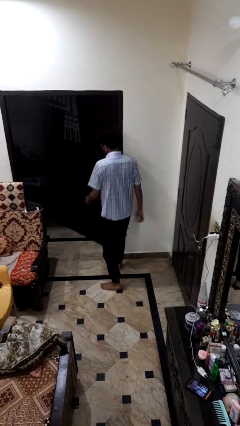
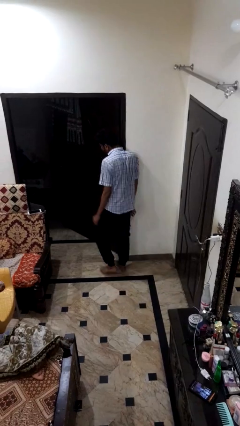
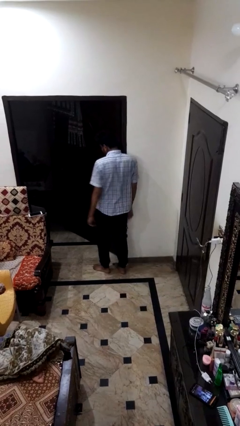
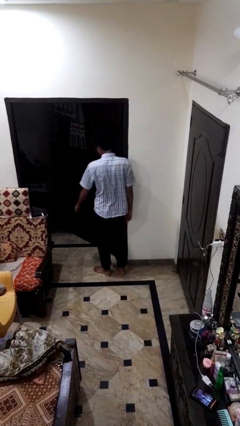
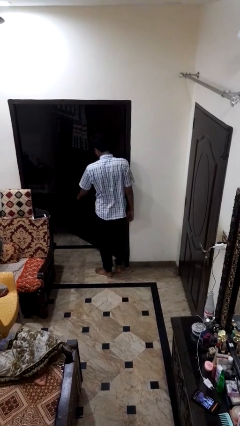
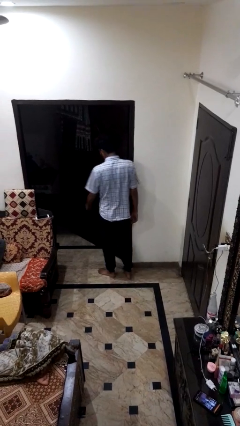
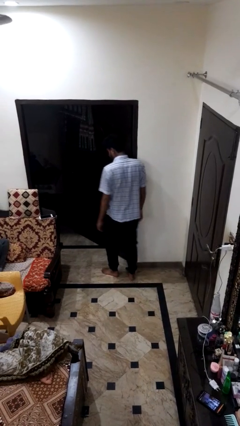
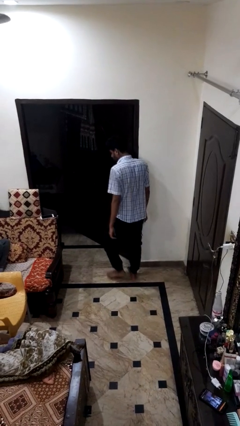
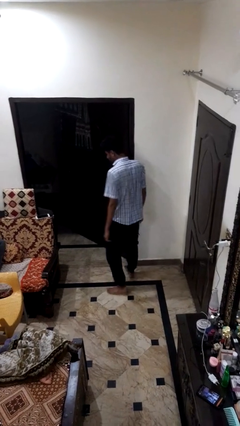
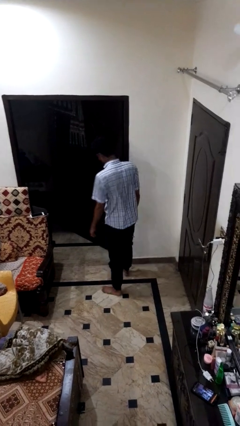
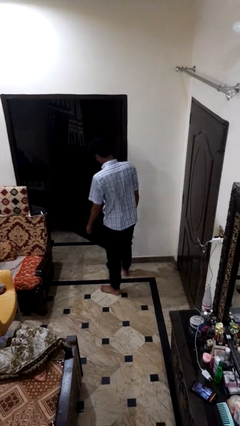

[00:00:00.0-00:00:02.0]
person bumps into wall

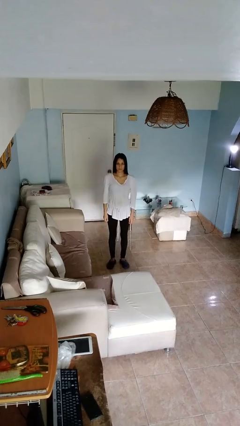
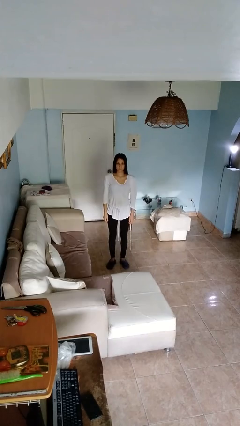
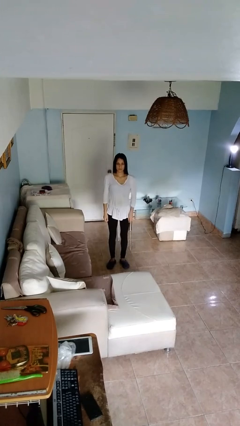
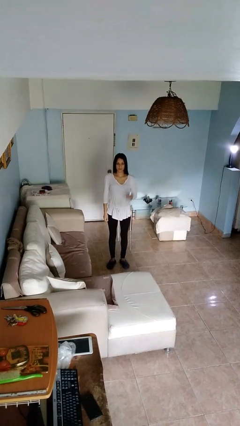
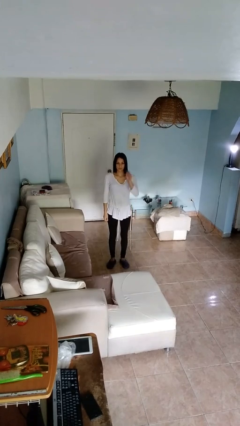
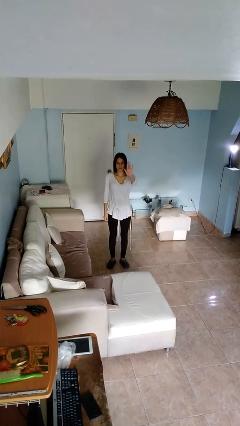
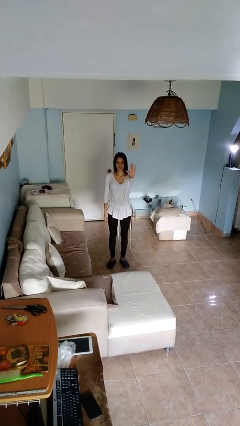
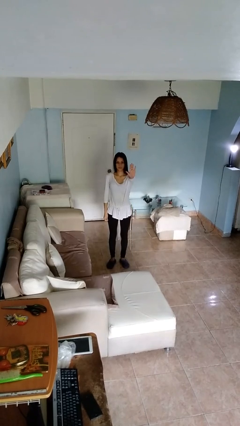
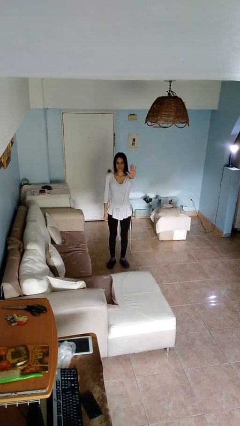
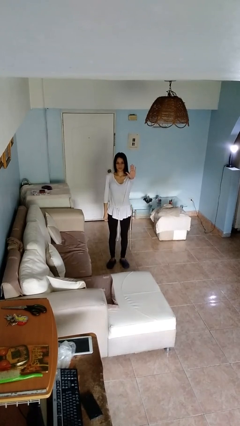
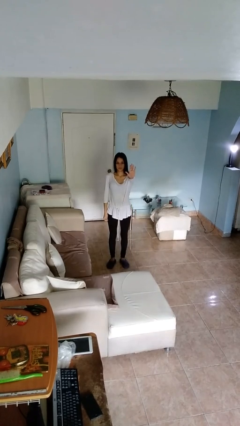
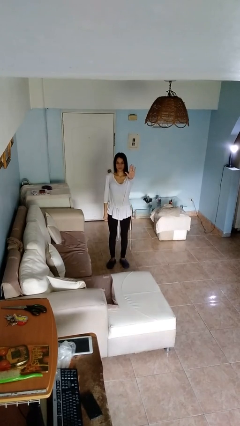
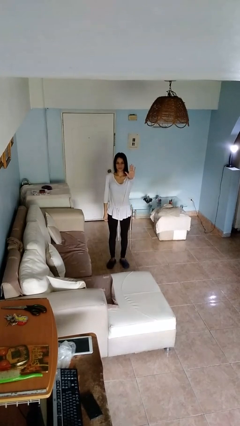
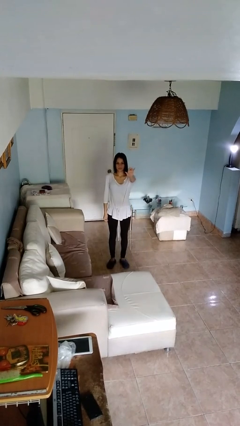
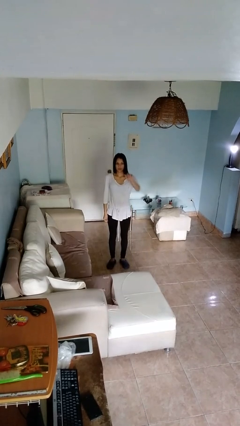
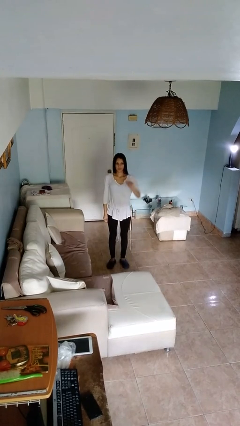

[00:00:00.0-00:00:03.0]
person gestures stop

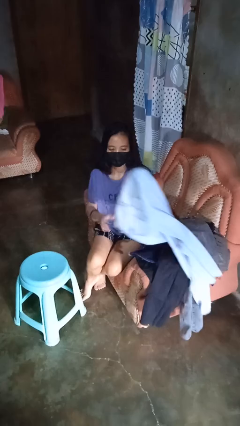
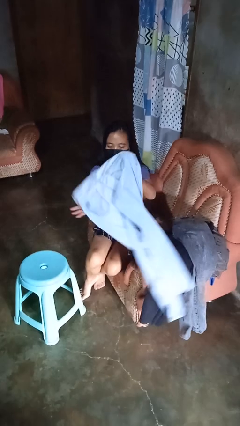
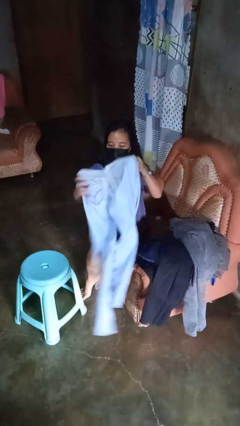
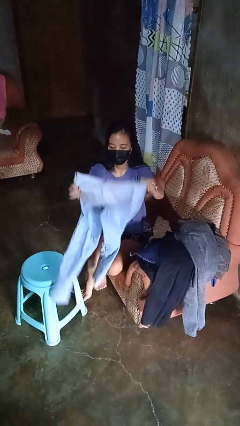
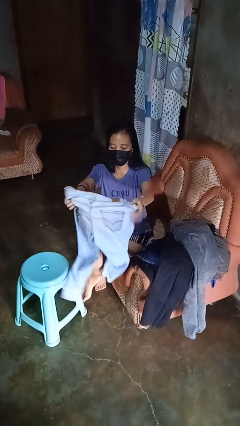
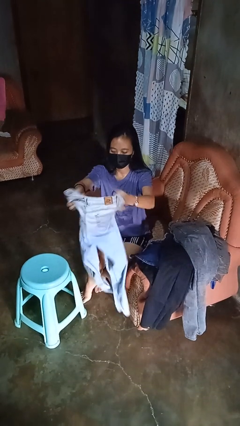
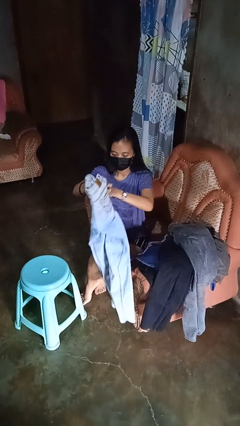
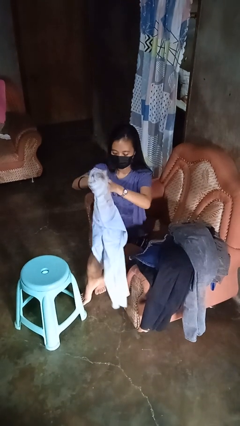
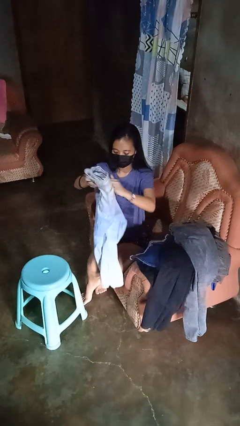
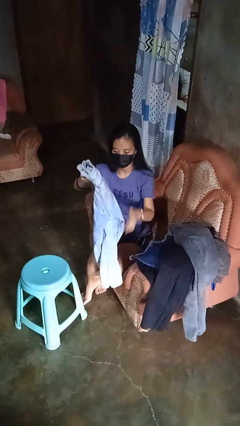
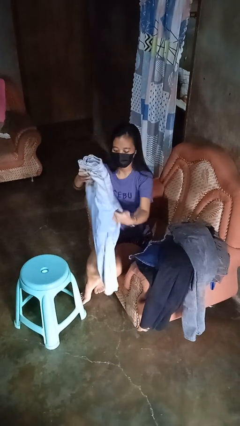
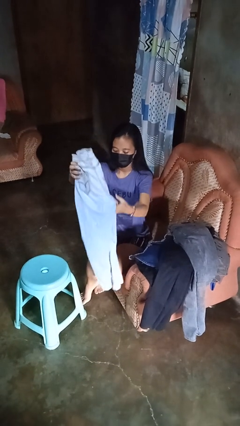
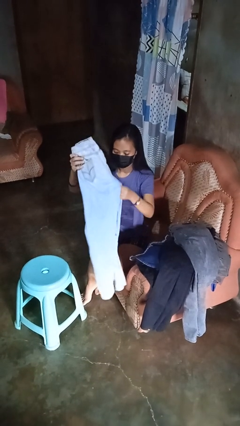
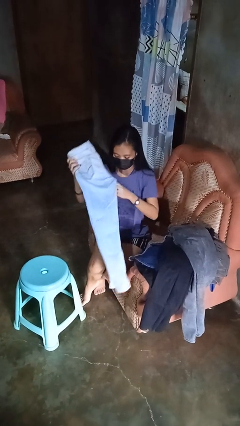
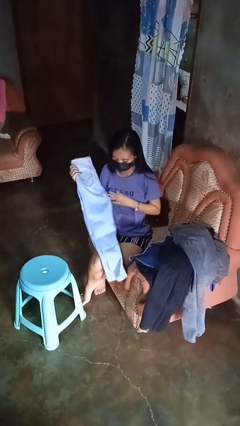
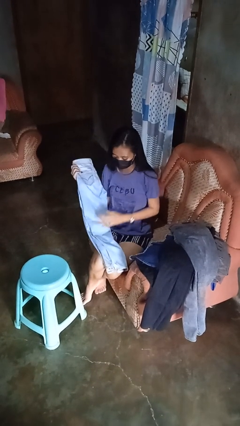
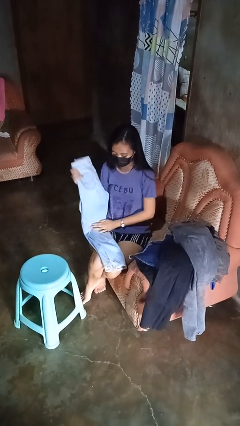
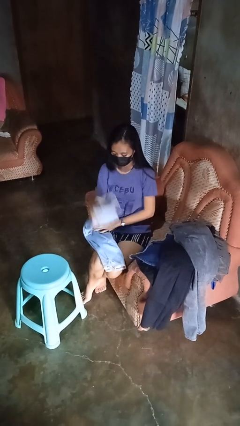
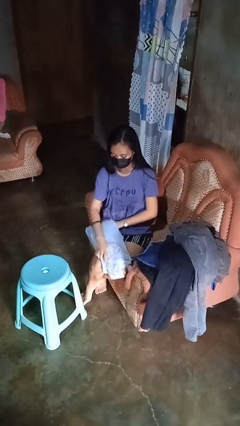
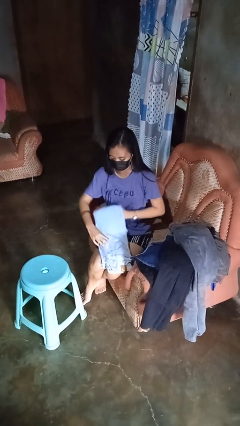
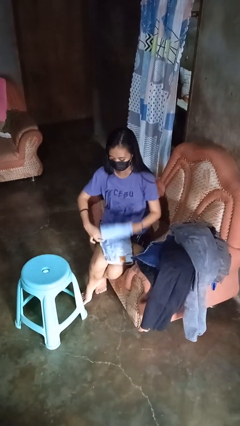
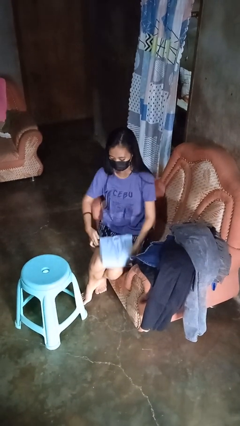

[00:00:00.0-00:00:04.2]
person folds pants

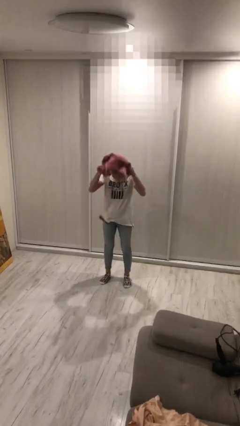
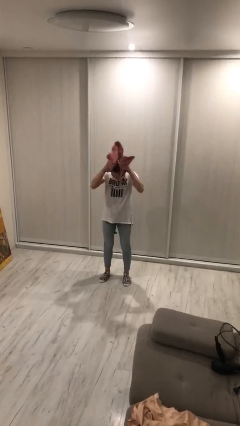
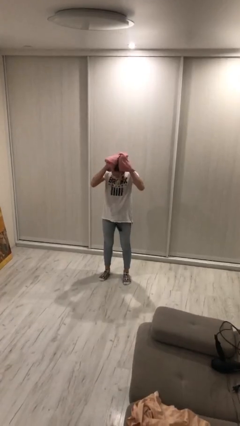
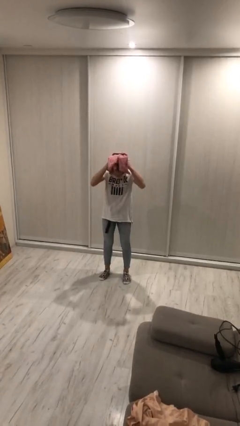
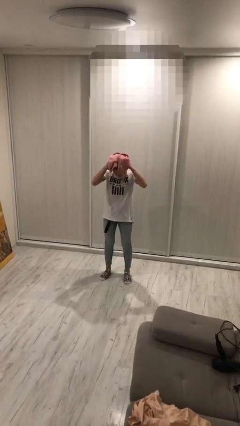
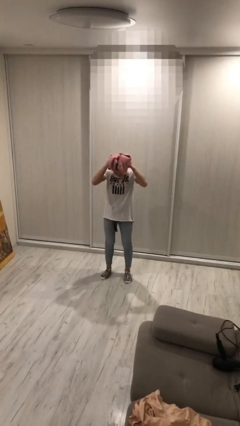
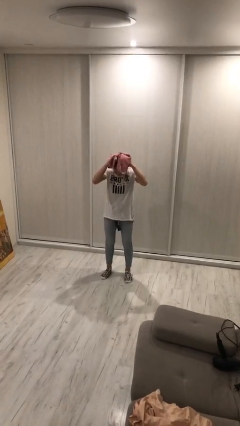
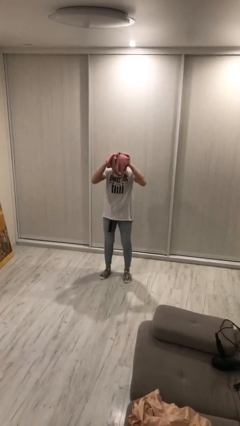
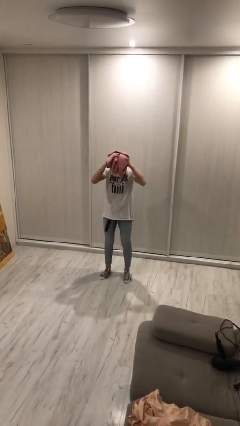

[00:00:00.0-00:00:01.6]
person dries hair with towel

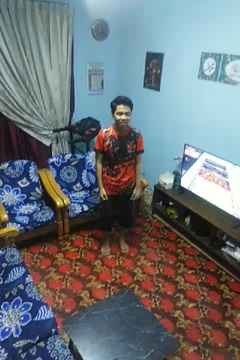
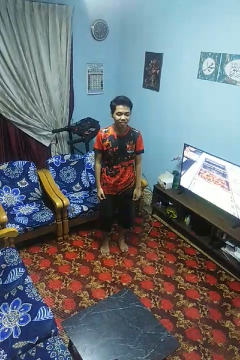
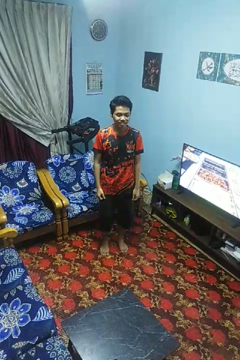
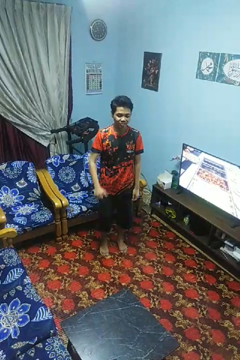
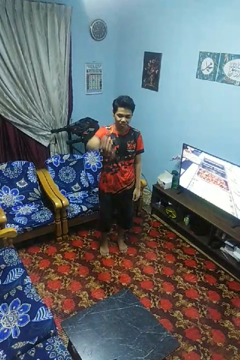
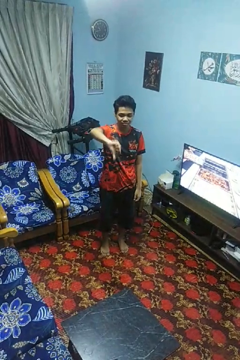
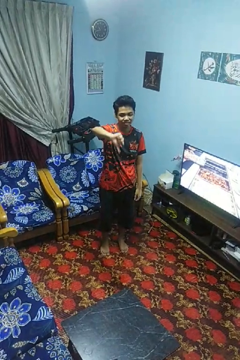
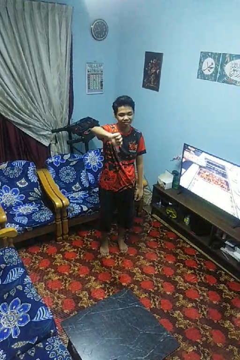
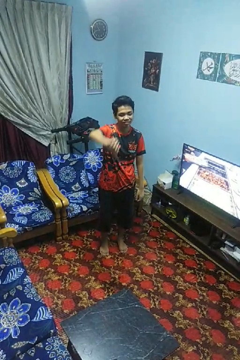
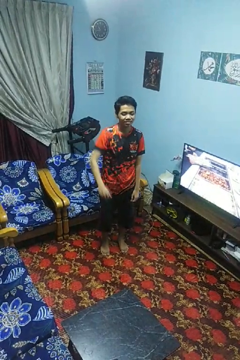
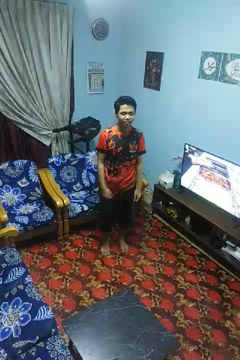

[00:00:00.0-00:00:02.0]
person gestures thumbs down

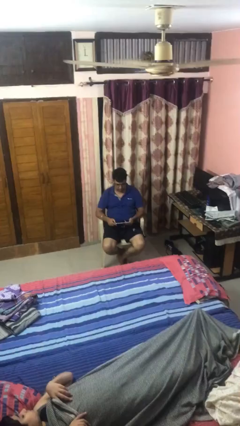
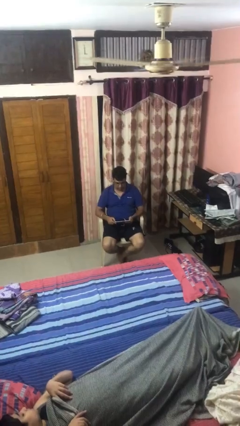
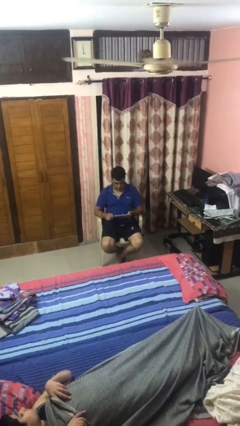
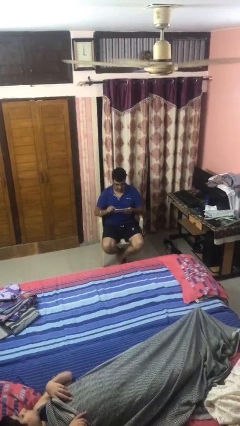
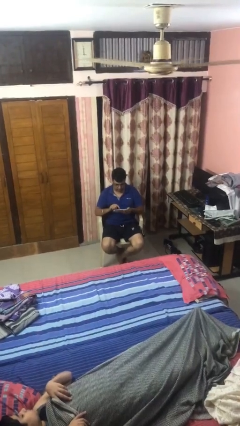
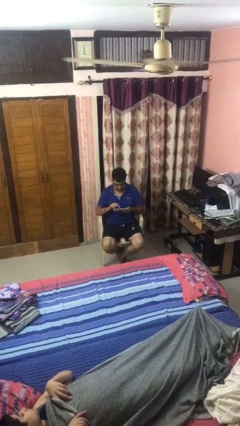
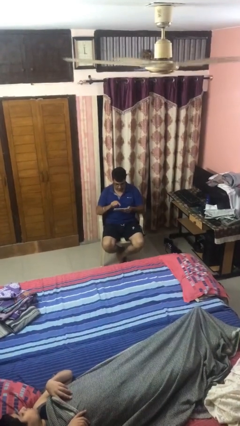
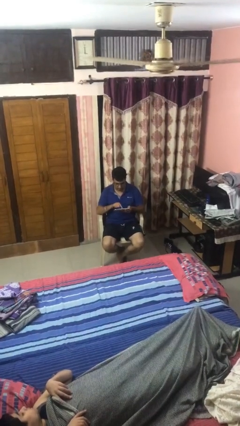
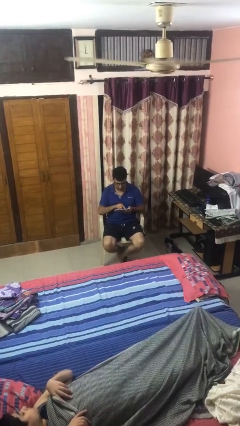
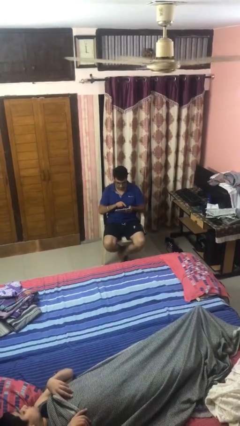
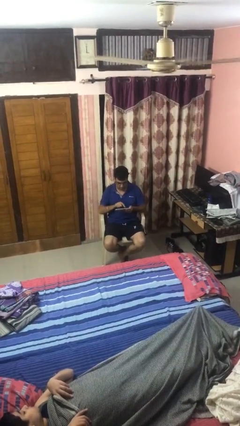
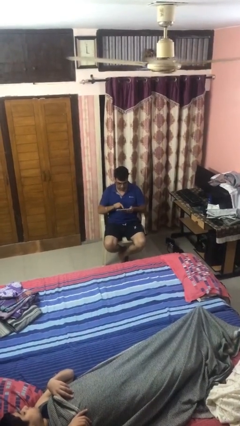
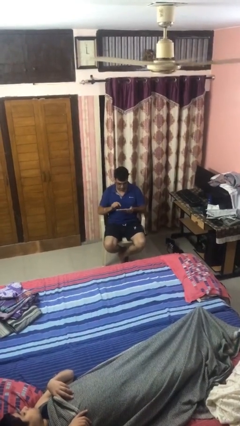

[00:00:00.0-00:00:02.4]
person interacts with tablet

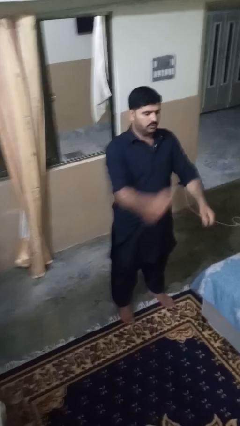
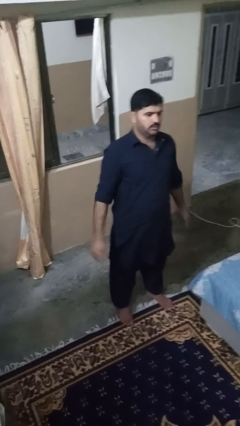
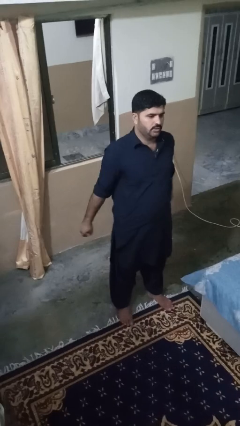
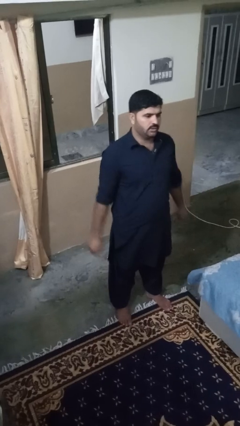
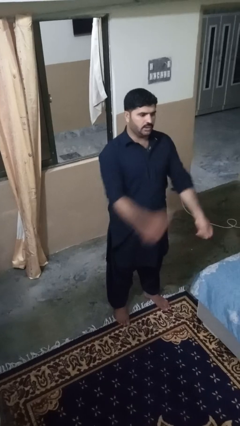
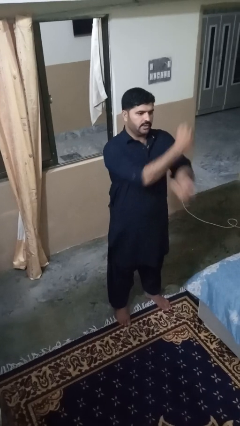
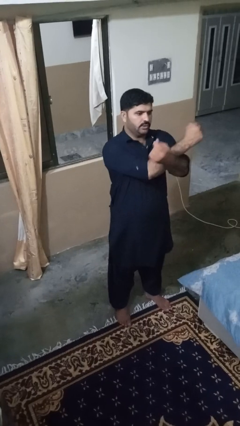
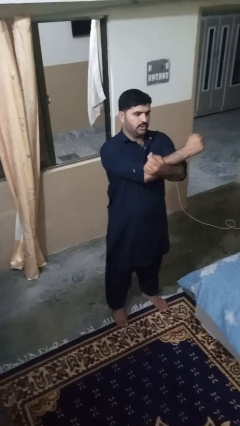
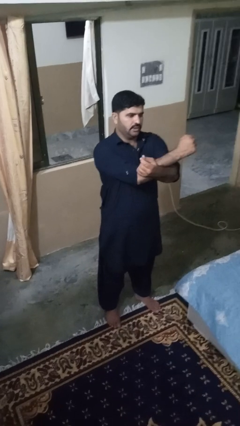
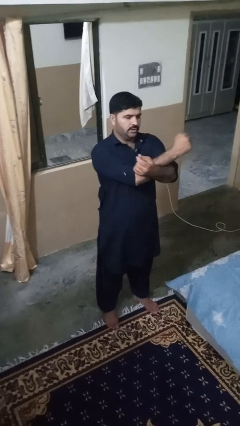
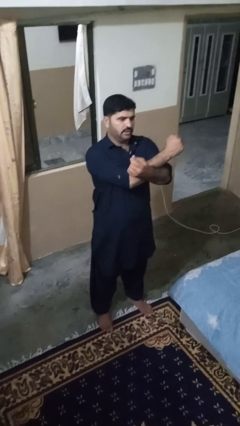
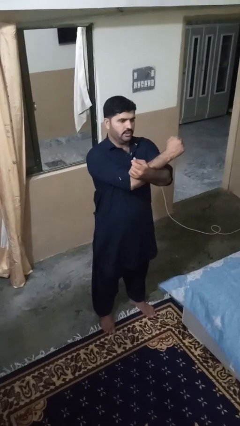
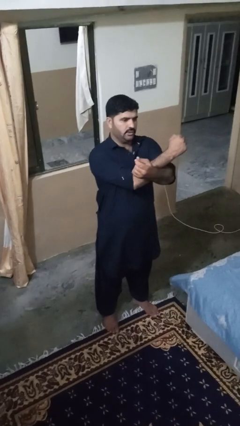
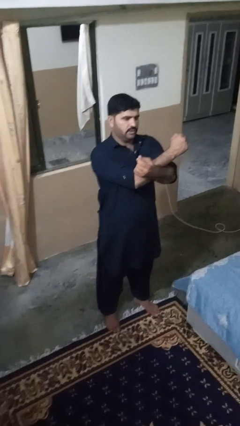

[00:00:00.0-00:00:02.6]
person crosses arms
